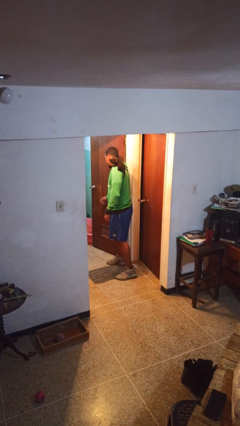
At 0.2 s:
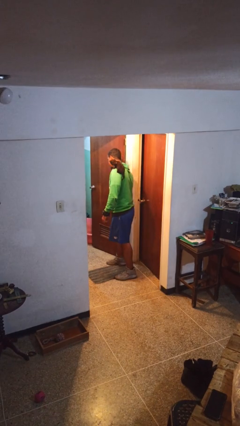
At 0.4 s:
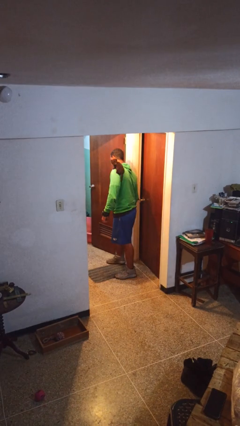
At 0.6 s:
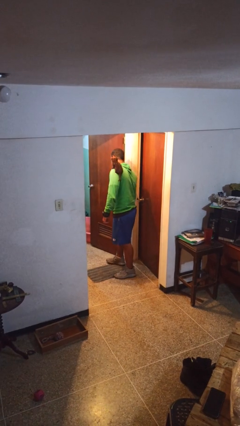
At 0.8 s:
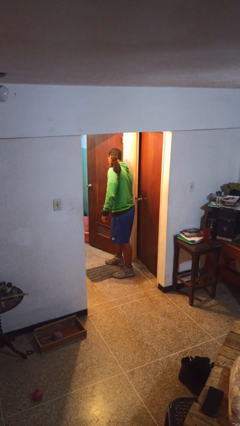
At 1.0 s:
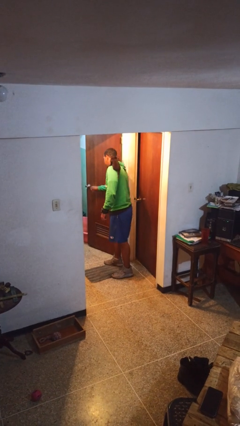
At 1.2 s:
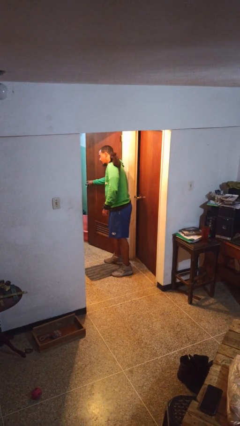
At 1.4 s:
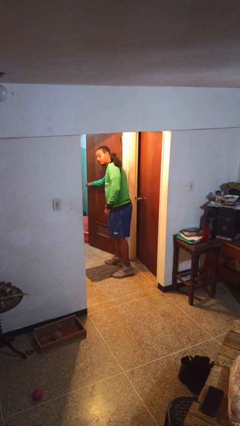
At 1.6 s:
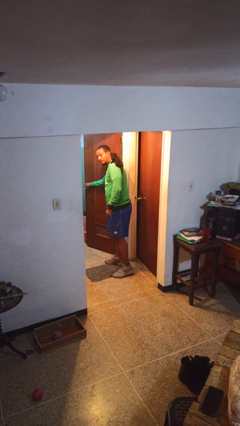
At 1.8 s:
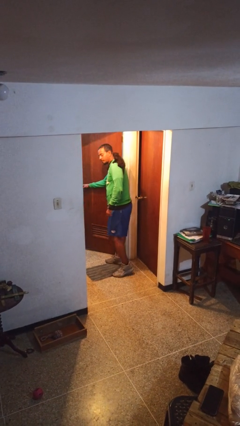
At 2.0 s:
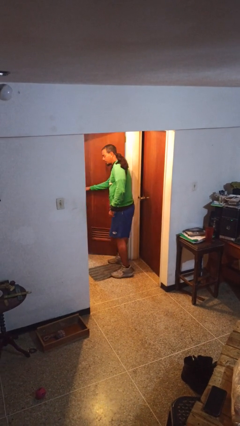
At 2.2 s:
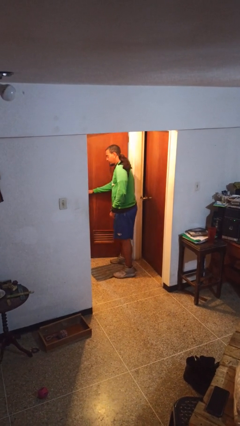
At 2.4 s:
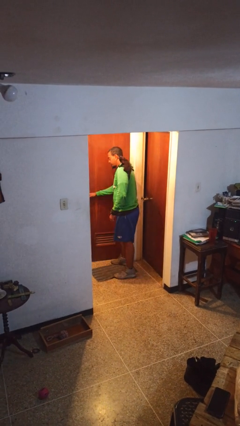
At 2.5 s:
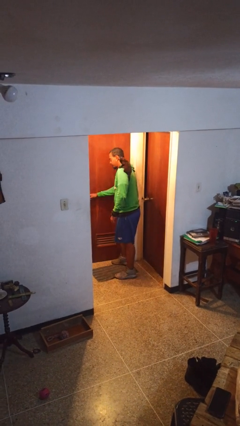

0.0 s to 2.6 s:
person closes facility door

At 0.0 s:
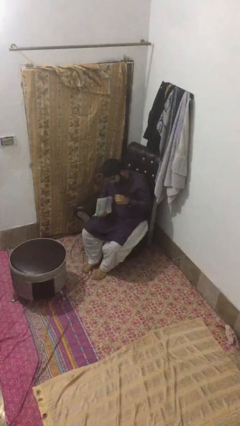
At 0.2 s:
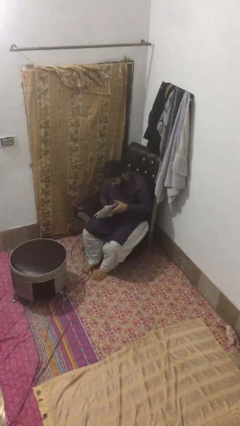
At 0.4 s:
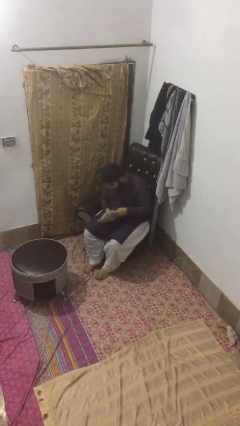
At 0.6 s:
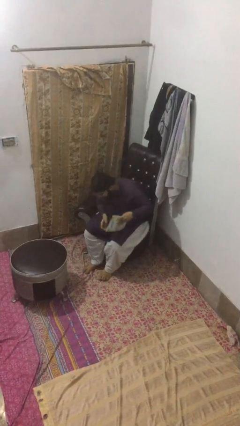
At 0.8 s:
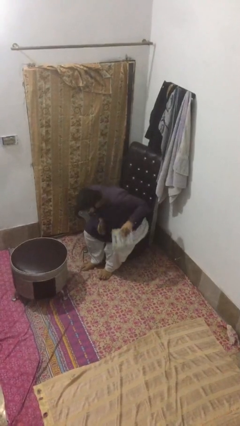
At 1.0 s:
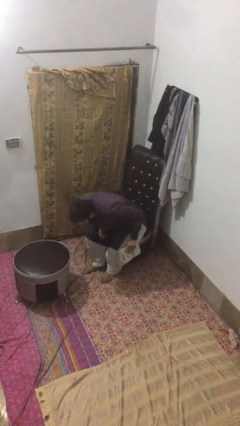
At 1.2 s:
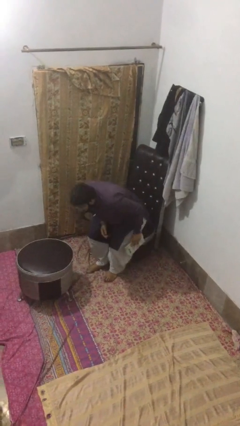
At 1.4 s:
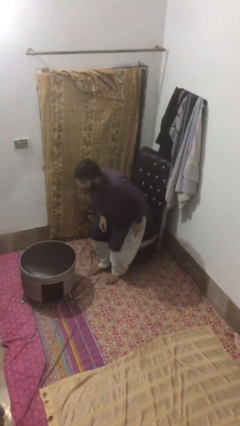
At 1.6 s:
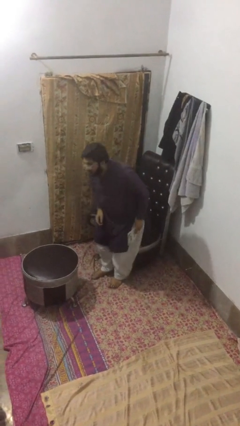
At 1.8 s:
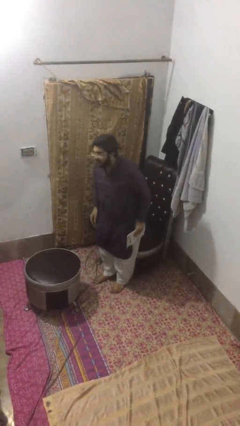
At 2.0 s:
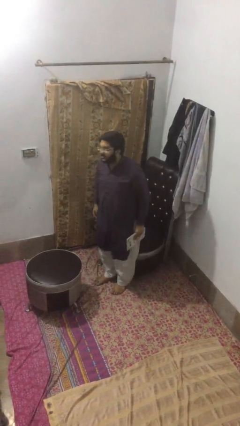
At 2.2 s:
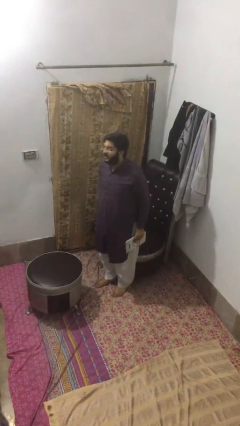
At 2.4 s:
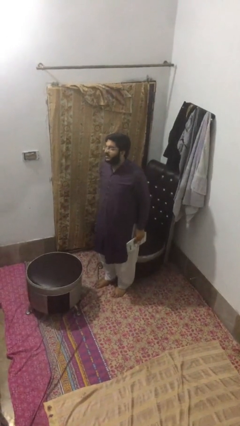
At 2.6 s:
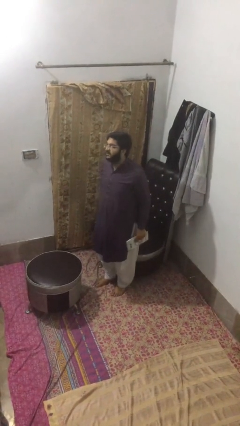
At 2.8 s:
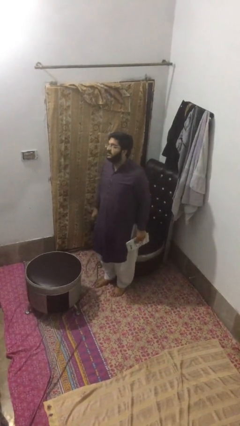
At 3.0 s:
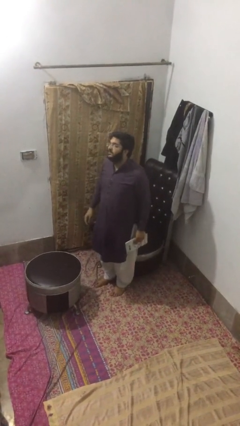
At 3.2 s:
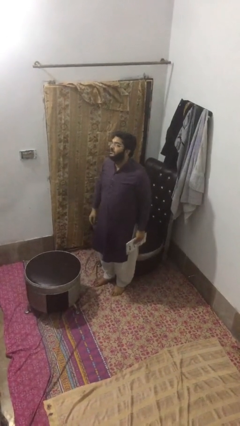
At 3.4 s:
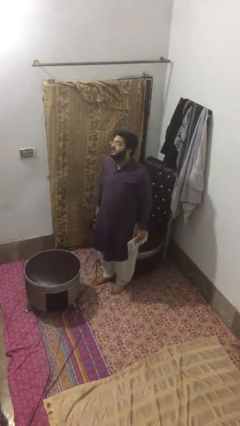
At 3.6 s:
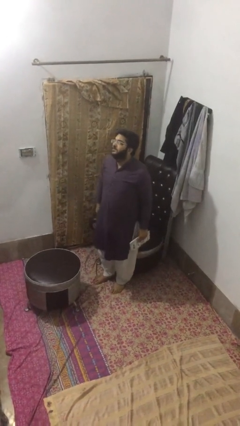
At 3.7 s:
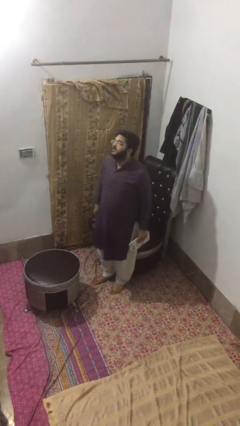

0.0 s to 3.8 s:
person stands up

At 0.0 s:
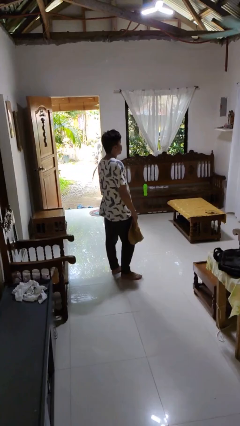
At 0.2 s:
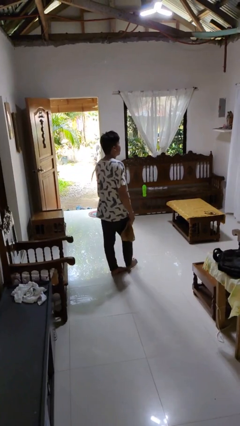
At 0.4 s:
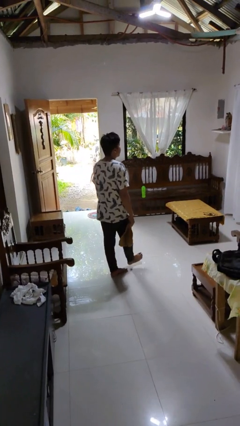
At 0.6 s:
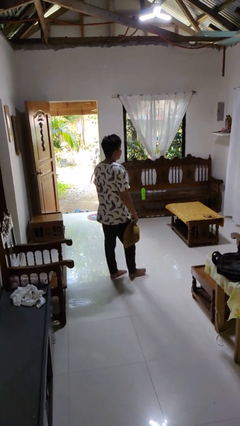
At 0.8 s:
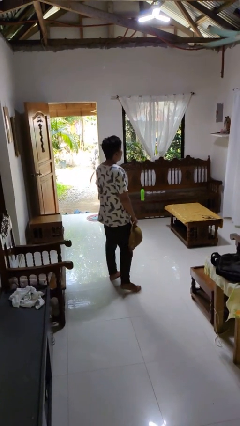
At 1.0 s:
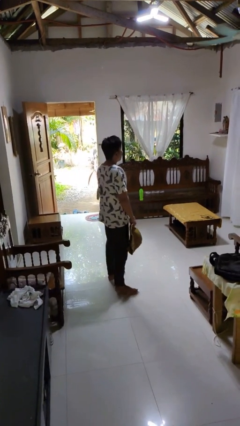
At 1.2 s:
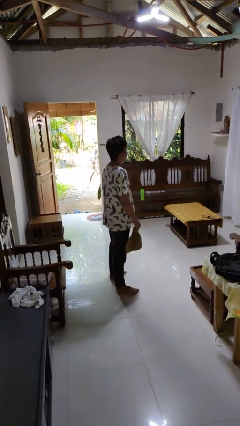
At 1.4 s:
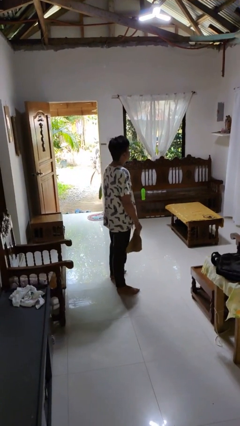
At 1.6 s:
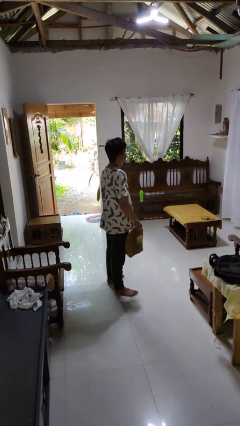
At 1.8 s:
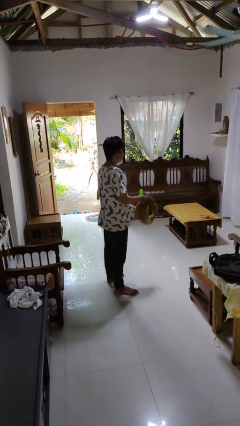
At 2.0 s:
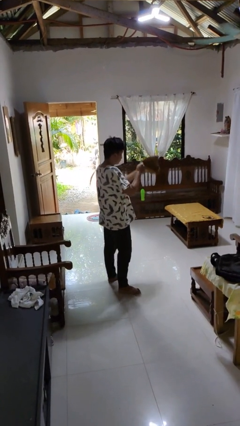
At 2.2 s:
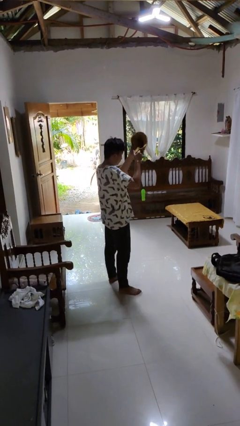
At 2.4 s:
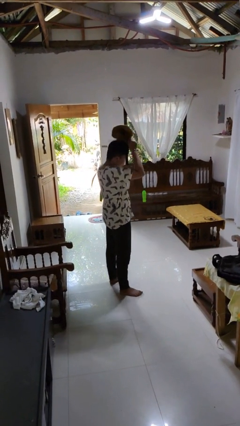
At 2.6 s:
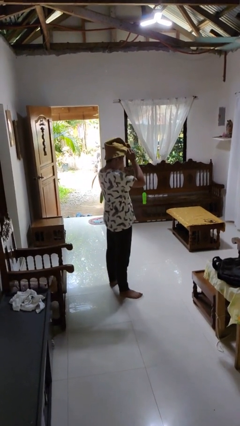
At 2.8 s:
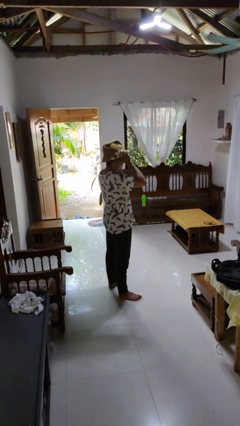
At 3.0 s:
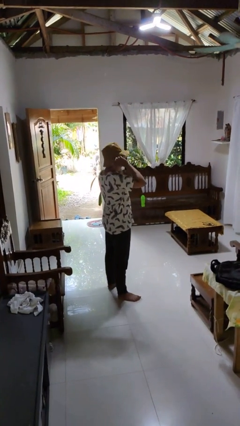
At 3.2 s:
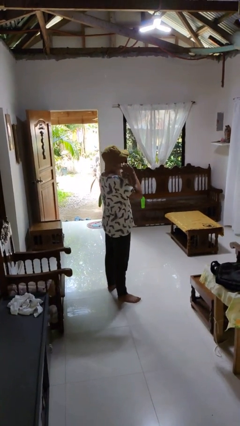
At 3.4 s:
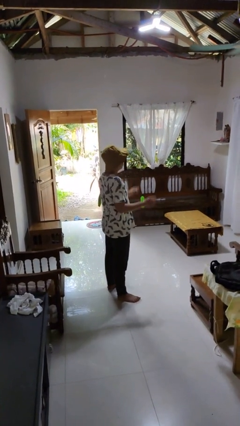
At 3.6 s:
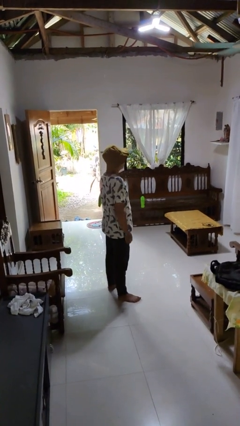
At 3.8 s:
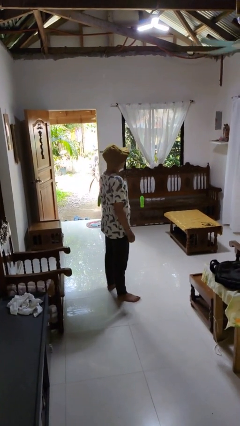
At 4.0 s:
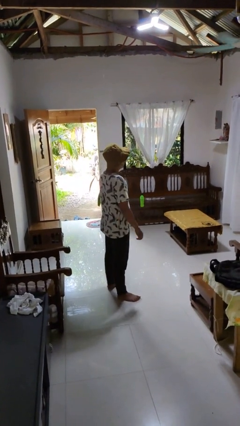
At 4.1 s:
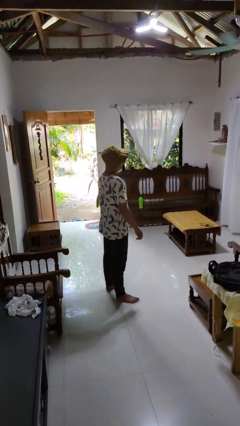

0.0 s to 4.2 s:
person puts on hat

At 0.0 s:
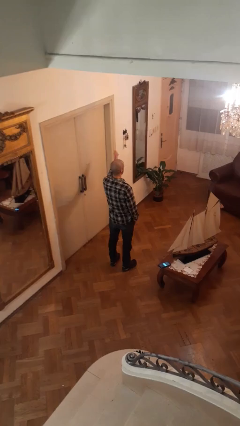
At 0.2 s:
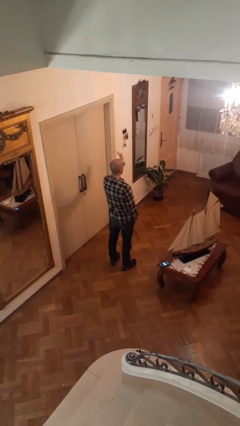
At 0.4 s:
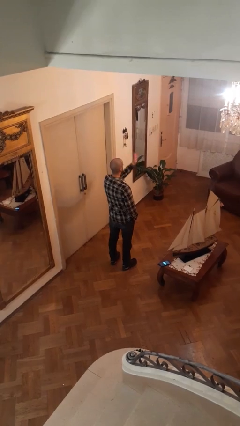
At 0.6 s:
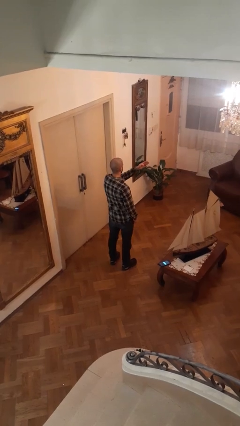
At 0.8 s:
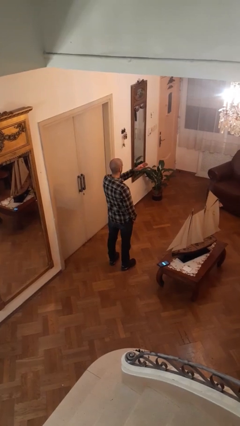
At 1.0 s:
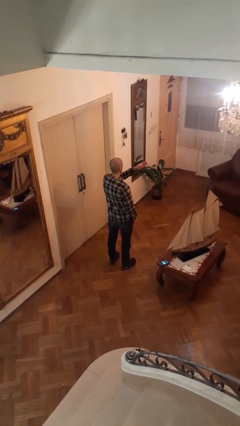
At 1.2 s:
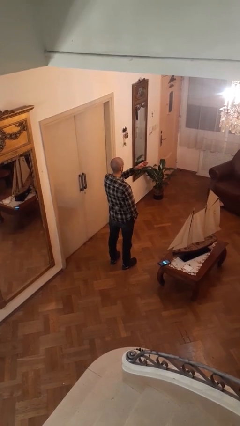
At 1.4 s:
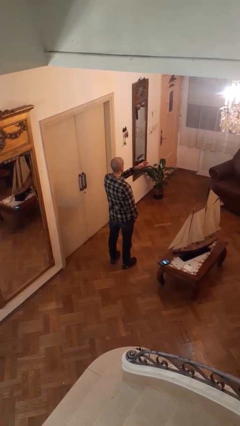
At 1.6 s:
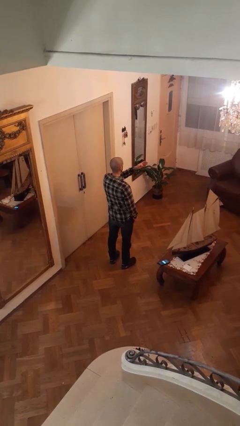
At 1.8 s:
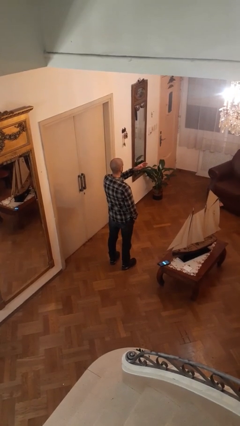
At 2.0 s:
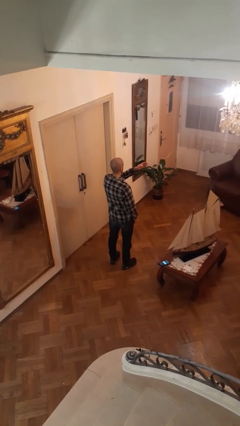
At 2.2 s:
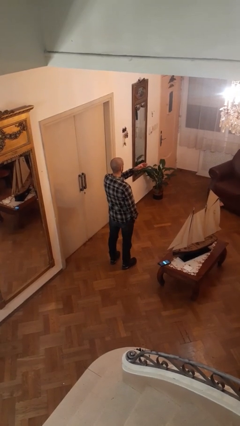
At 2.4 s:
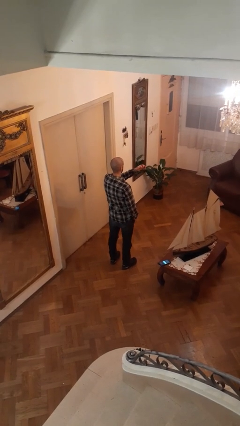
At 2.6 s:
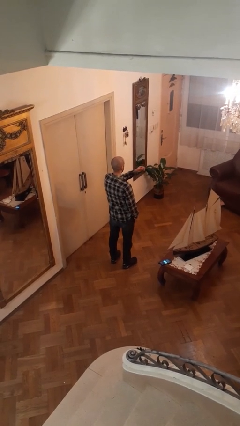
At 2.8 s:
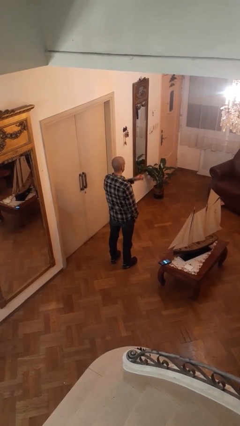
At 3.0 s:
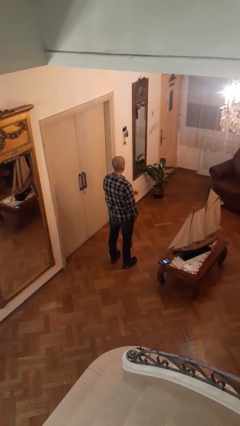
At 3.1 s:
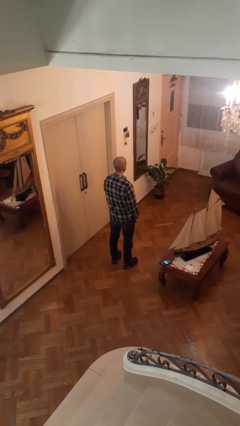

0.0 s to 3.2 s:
person gestures swipe right

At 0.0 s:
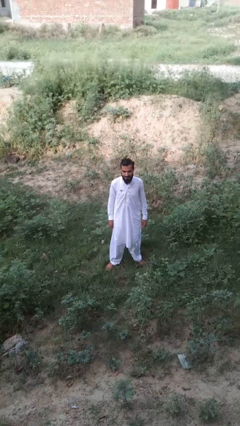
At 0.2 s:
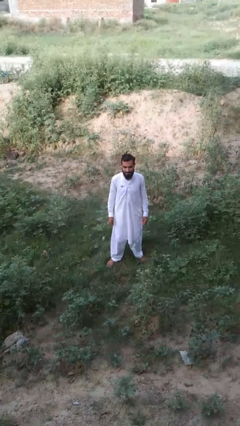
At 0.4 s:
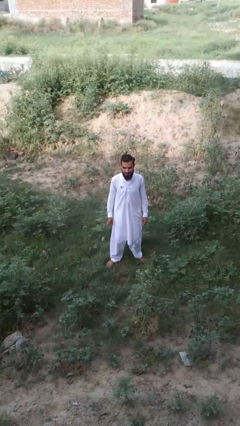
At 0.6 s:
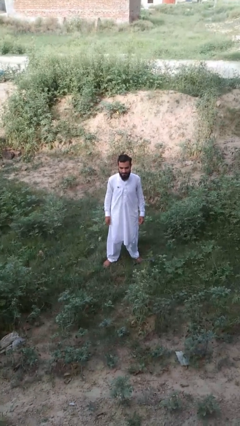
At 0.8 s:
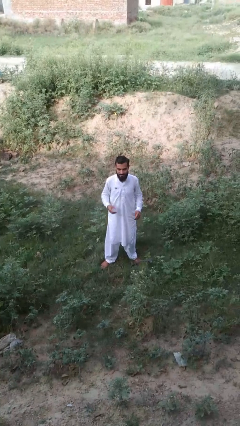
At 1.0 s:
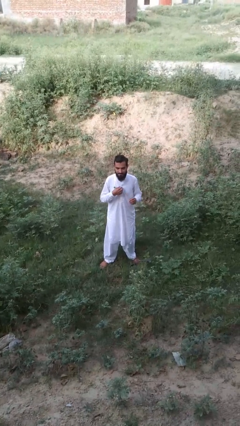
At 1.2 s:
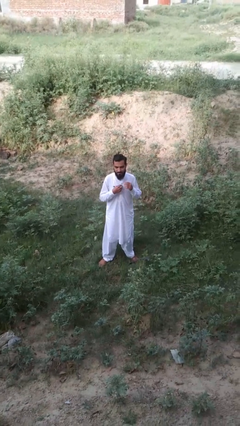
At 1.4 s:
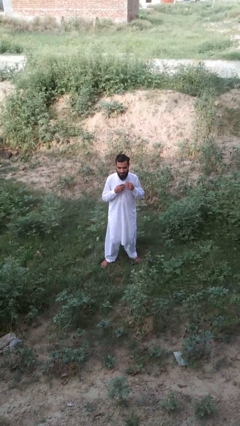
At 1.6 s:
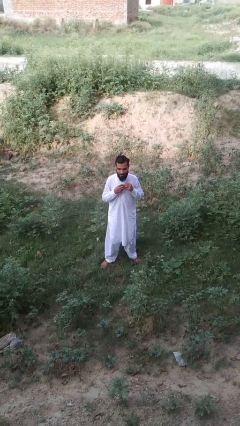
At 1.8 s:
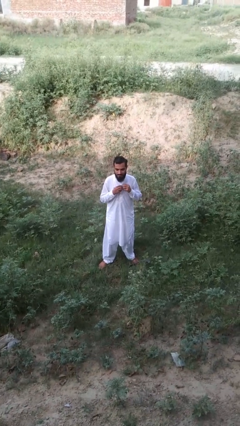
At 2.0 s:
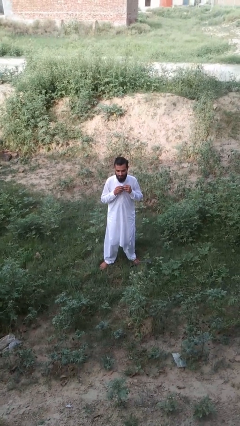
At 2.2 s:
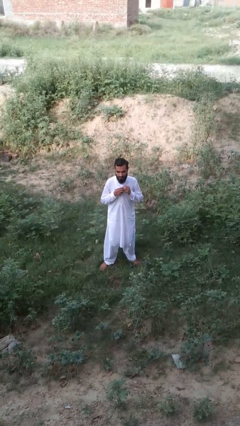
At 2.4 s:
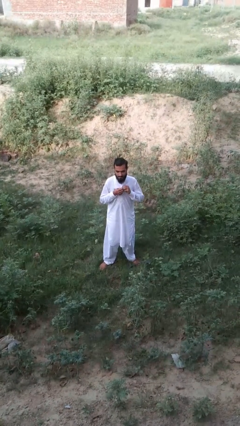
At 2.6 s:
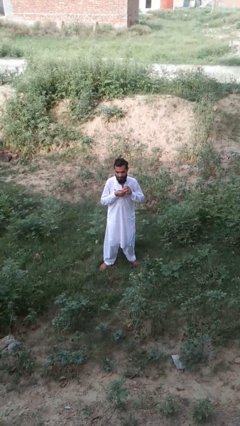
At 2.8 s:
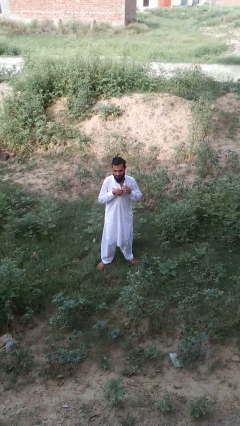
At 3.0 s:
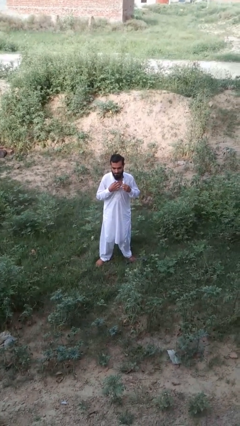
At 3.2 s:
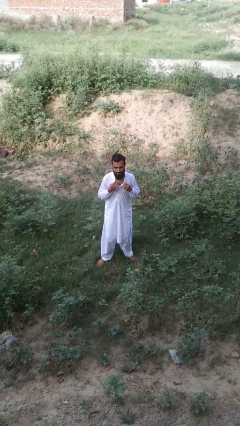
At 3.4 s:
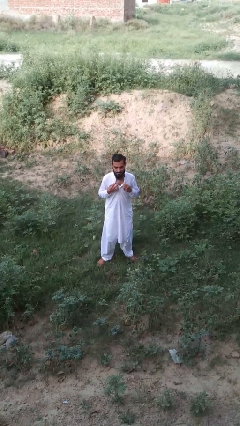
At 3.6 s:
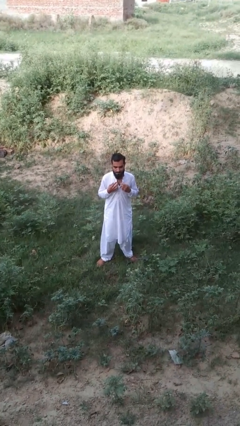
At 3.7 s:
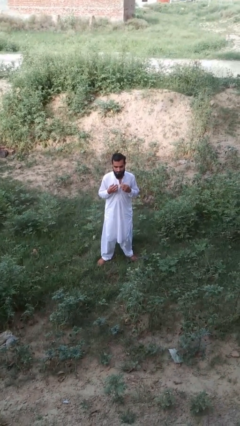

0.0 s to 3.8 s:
person unbuttons shirt
